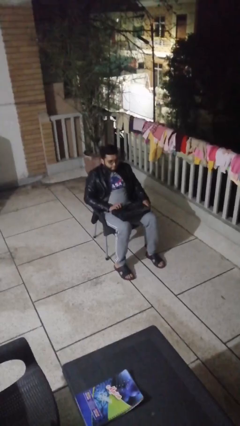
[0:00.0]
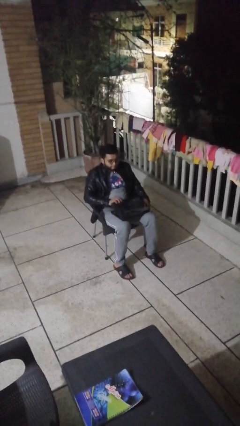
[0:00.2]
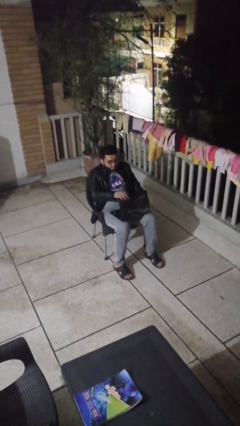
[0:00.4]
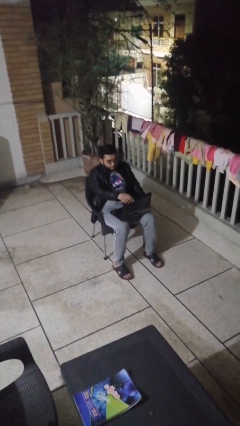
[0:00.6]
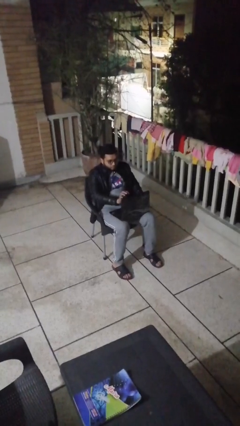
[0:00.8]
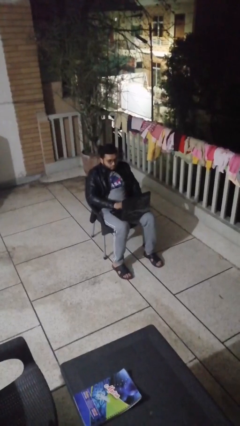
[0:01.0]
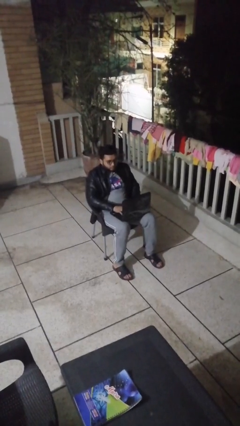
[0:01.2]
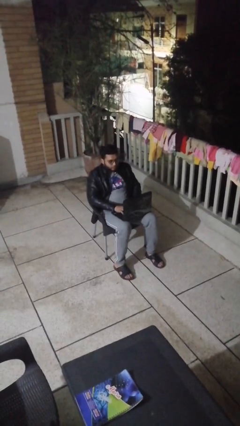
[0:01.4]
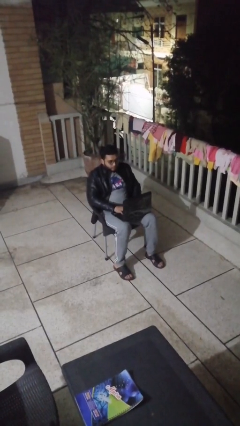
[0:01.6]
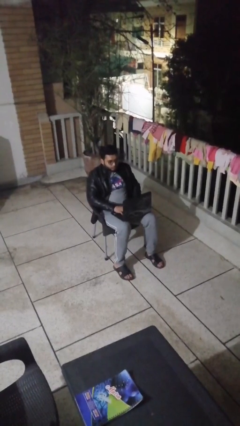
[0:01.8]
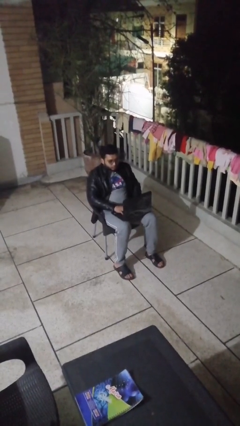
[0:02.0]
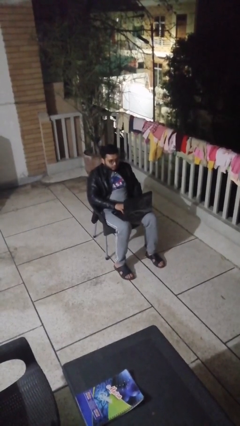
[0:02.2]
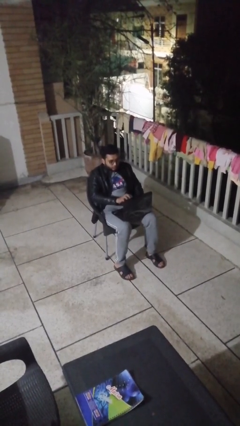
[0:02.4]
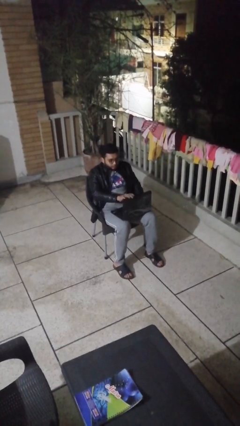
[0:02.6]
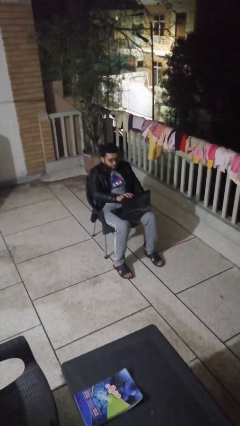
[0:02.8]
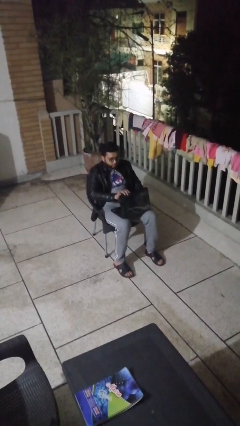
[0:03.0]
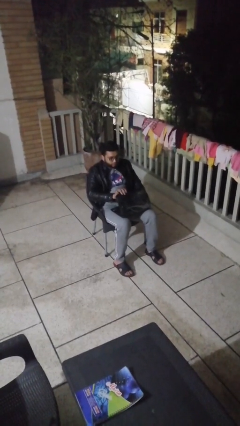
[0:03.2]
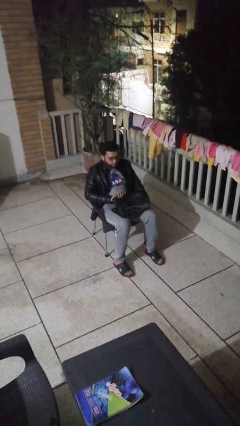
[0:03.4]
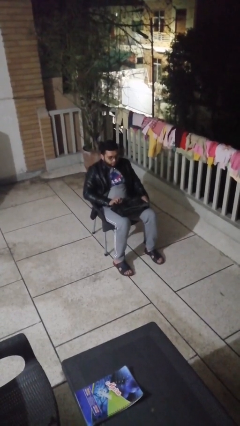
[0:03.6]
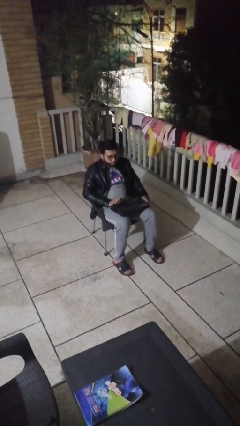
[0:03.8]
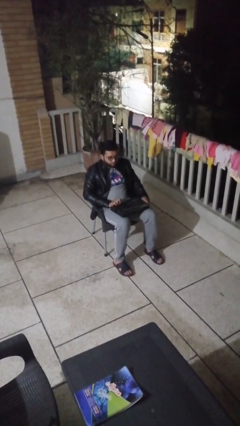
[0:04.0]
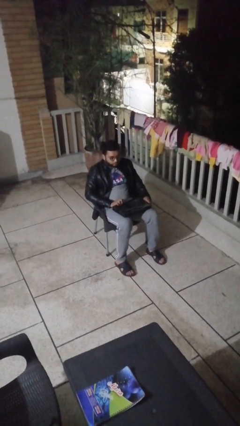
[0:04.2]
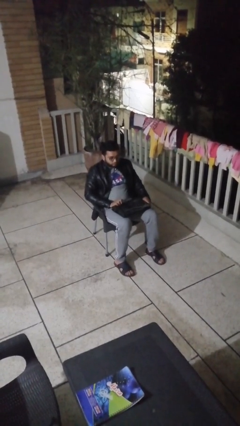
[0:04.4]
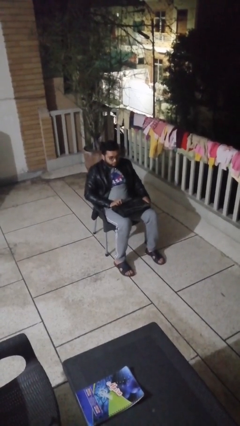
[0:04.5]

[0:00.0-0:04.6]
person interacts with laptop

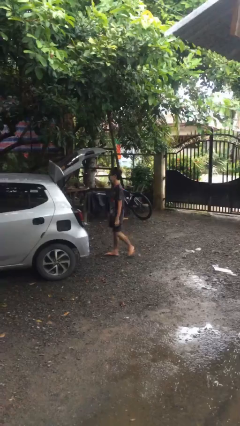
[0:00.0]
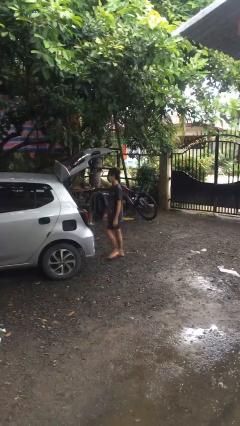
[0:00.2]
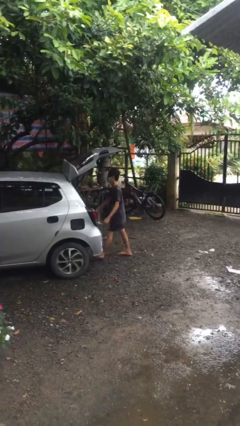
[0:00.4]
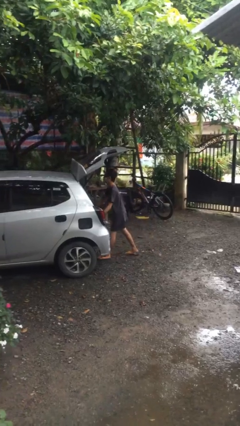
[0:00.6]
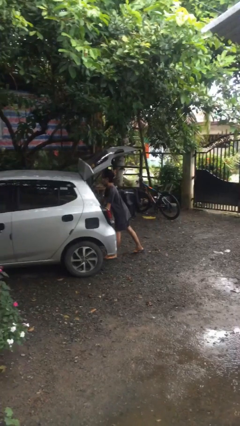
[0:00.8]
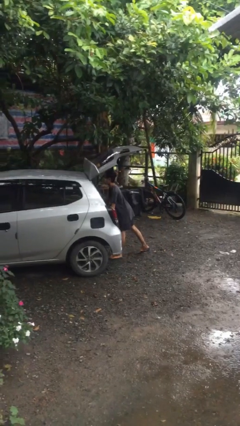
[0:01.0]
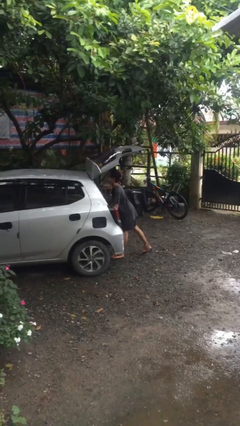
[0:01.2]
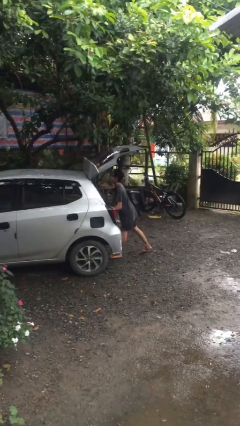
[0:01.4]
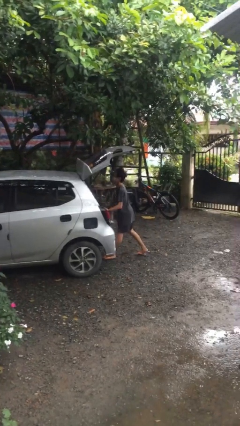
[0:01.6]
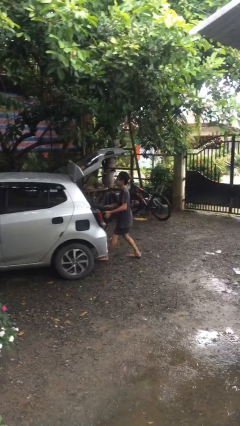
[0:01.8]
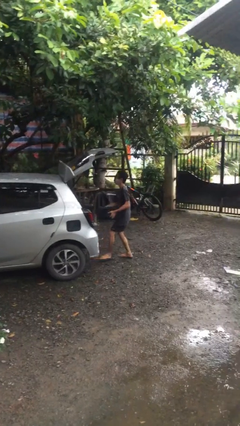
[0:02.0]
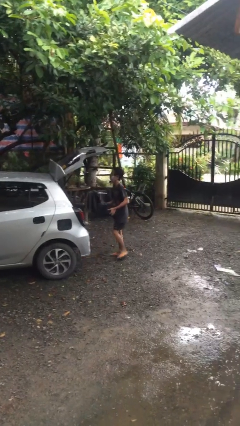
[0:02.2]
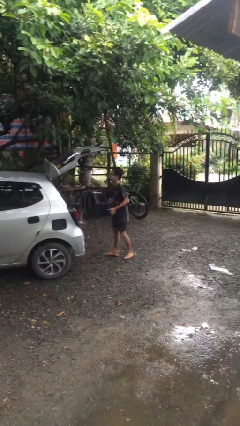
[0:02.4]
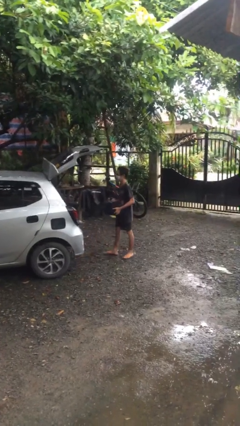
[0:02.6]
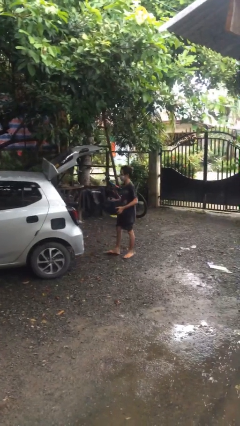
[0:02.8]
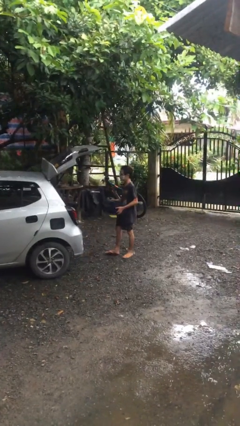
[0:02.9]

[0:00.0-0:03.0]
person unloads car

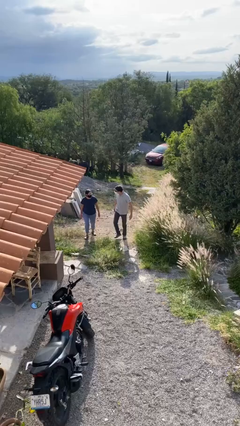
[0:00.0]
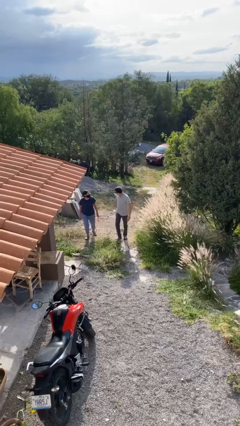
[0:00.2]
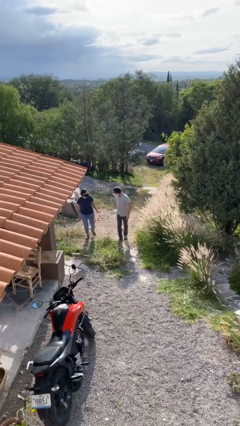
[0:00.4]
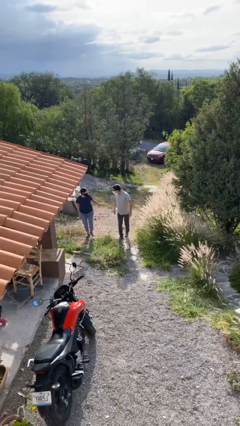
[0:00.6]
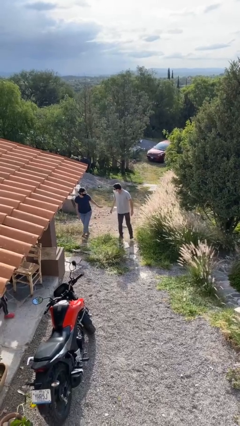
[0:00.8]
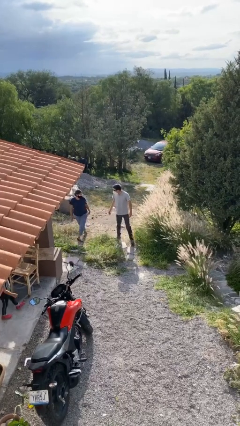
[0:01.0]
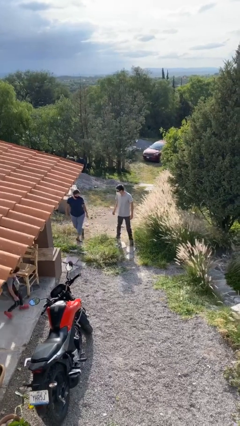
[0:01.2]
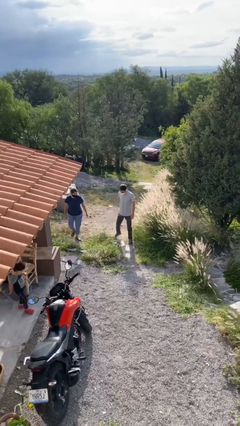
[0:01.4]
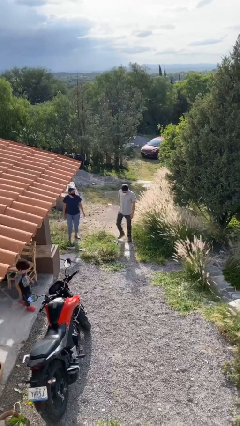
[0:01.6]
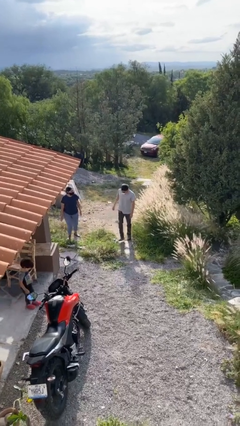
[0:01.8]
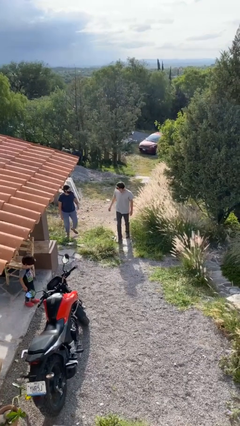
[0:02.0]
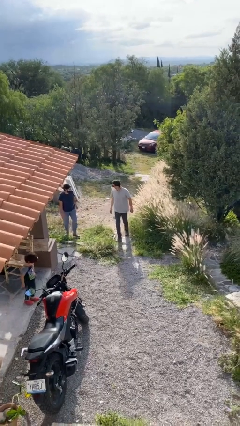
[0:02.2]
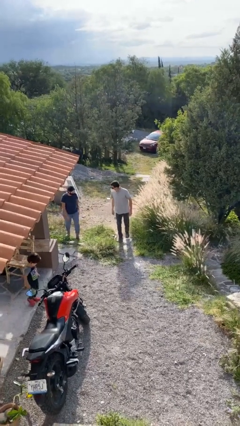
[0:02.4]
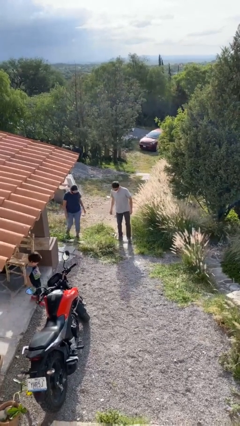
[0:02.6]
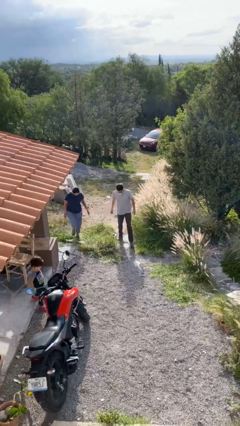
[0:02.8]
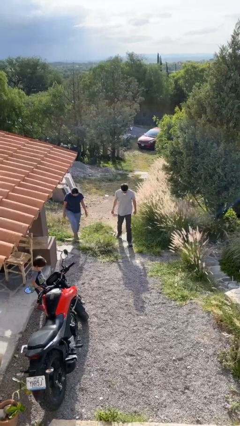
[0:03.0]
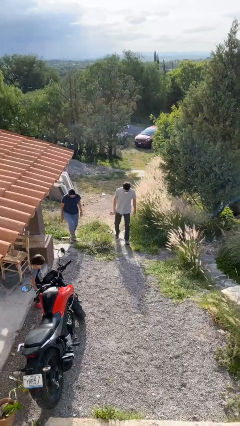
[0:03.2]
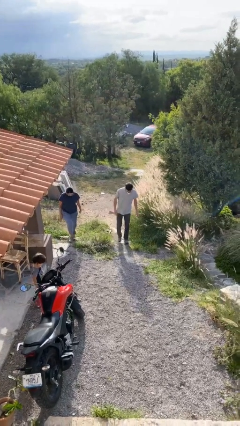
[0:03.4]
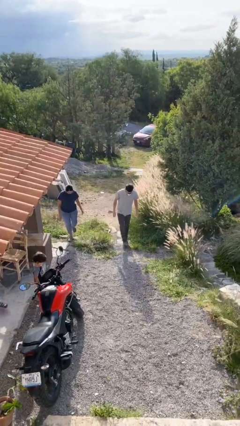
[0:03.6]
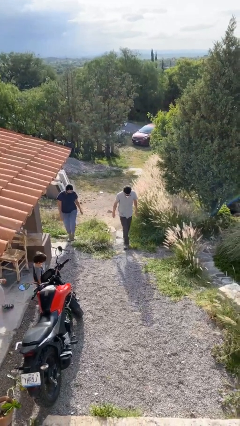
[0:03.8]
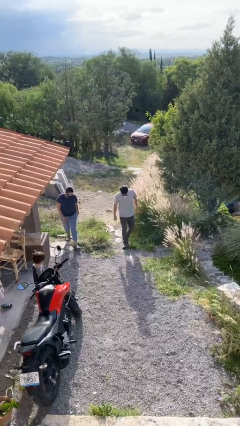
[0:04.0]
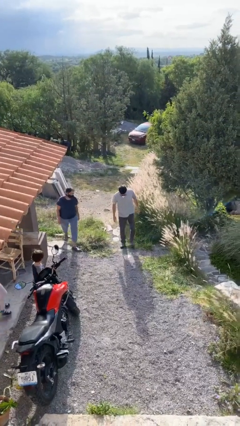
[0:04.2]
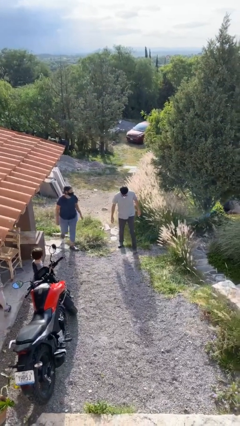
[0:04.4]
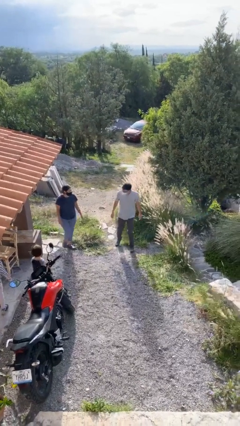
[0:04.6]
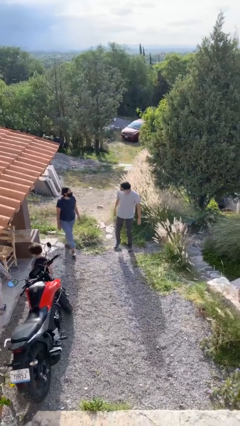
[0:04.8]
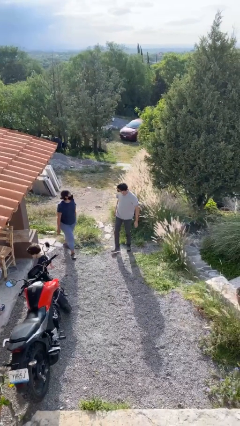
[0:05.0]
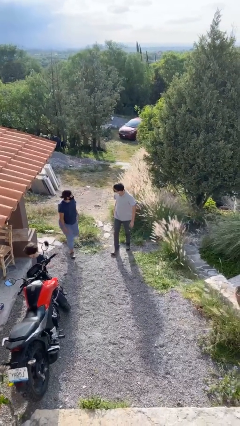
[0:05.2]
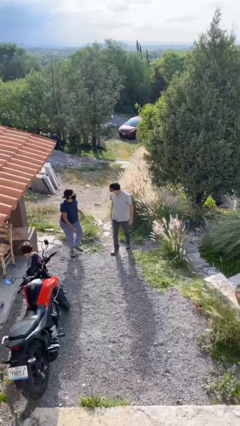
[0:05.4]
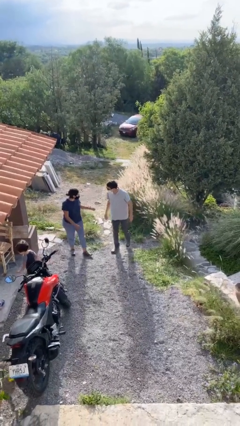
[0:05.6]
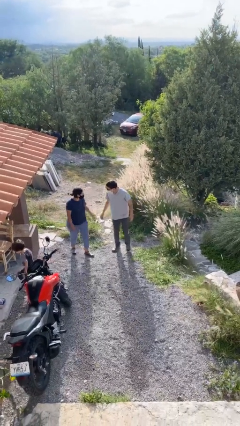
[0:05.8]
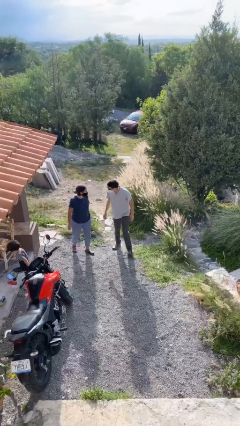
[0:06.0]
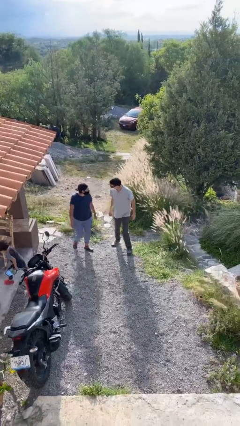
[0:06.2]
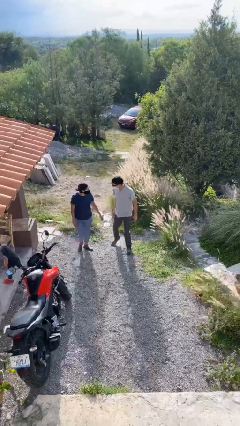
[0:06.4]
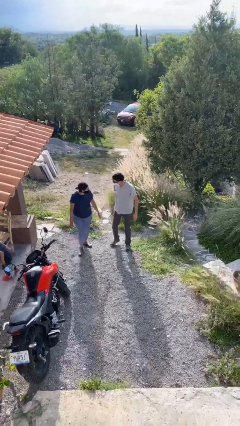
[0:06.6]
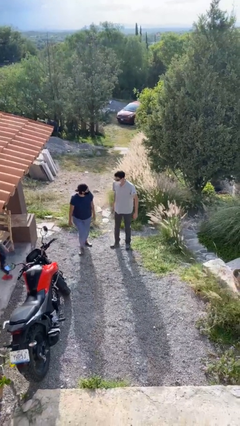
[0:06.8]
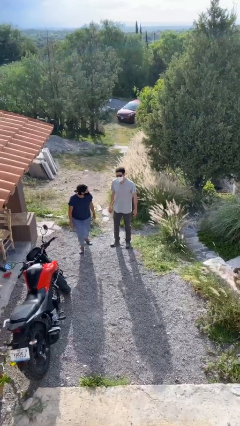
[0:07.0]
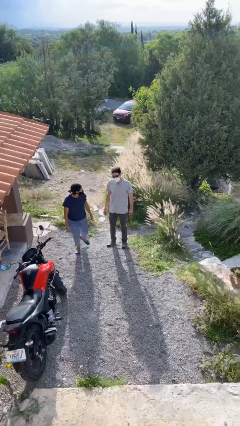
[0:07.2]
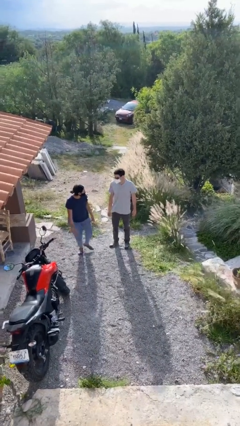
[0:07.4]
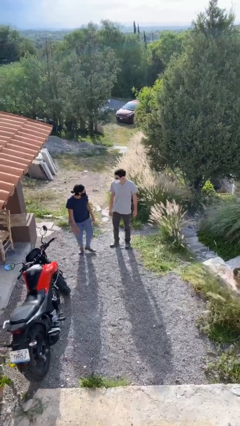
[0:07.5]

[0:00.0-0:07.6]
person talks to person

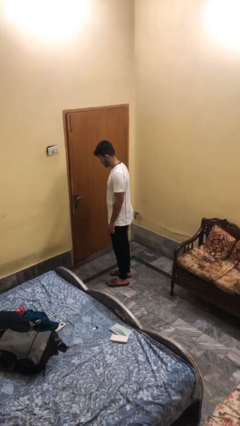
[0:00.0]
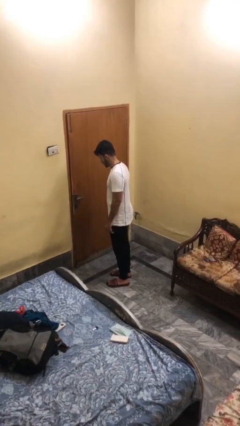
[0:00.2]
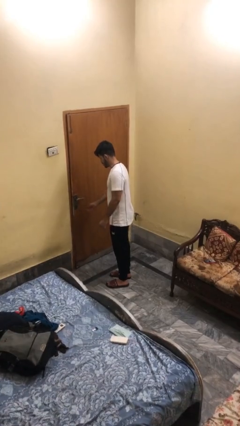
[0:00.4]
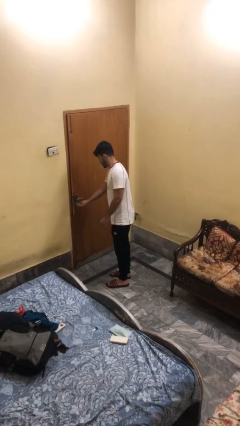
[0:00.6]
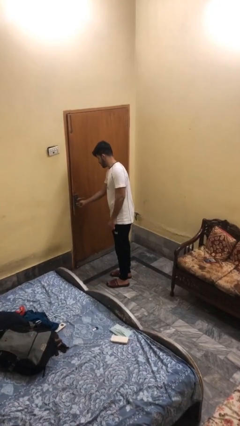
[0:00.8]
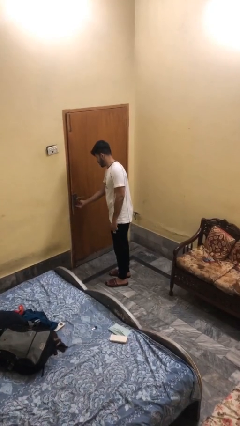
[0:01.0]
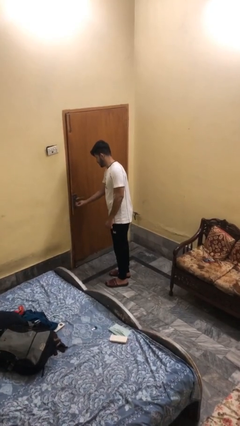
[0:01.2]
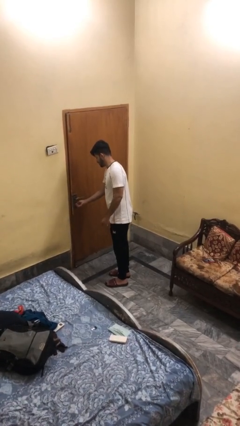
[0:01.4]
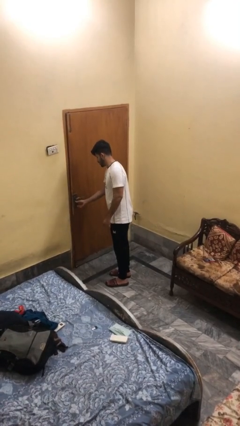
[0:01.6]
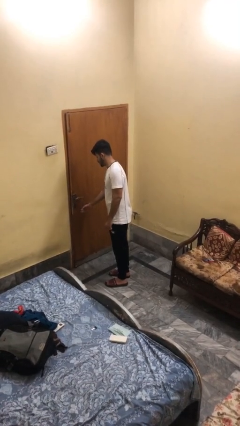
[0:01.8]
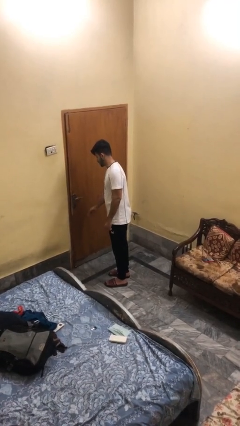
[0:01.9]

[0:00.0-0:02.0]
person locks door with keys
